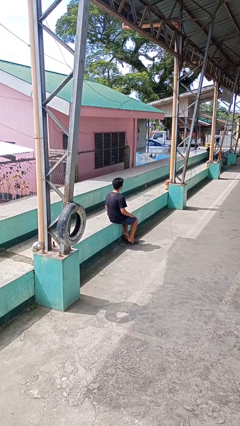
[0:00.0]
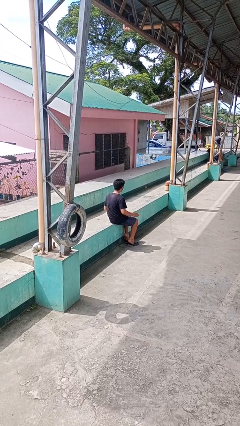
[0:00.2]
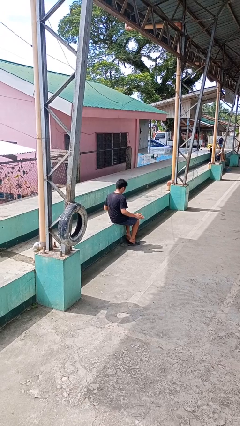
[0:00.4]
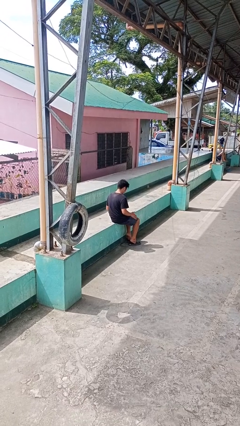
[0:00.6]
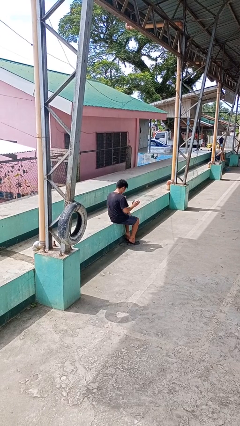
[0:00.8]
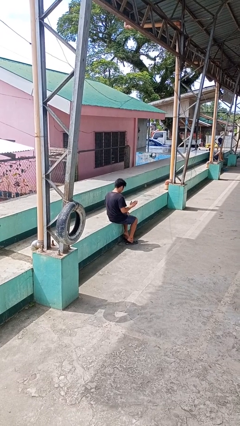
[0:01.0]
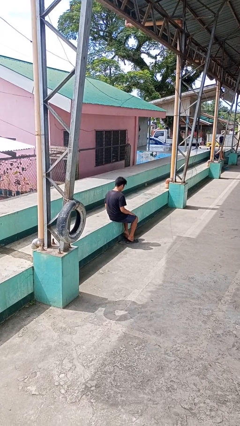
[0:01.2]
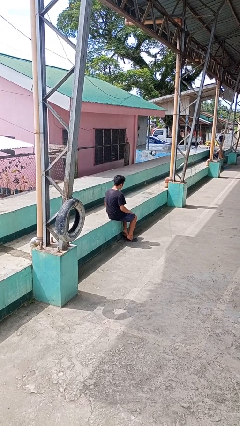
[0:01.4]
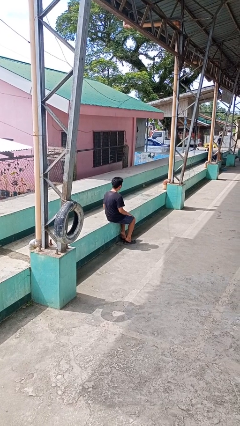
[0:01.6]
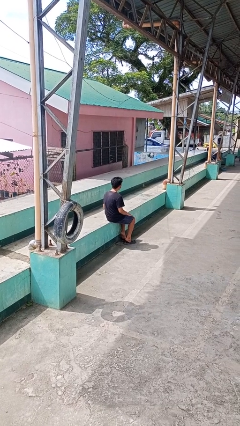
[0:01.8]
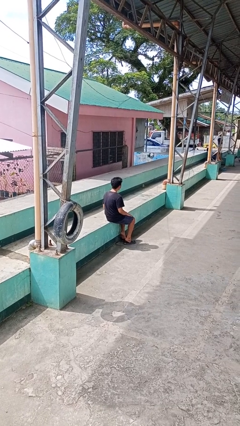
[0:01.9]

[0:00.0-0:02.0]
person slaps hands on thighs

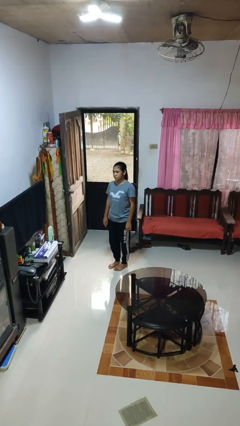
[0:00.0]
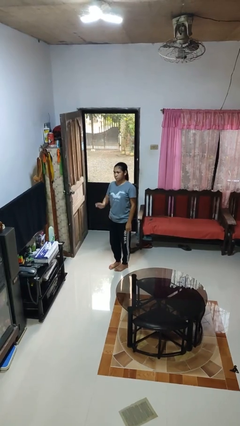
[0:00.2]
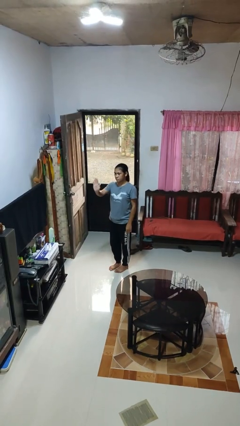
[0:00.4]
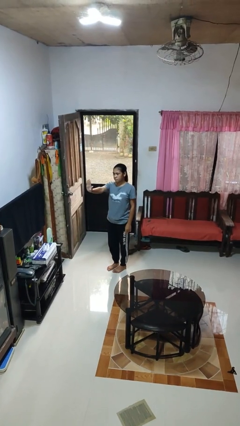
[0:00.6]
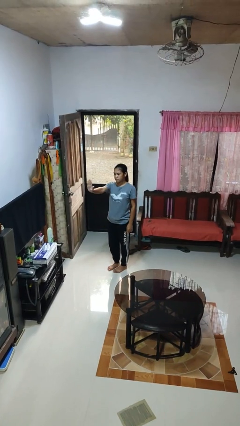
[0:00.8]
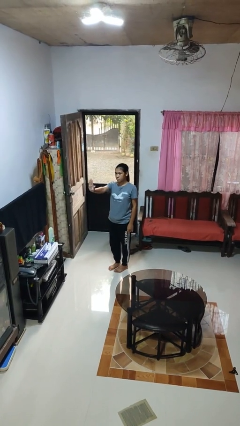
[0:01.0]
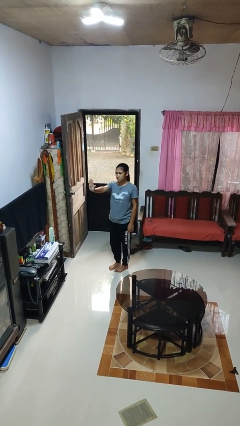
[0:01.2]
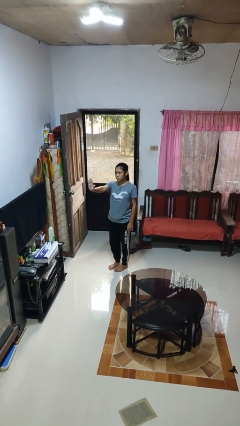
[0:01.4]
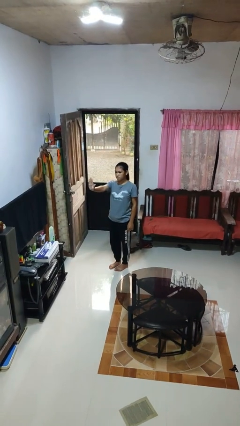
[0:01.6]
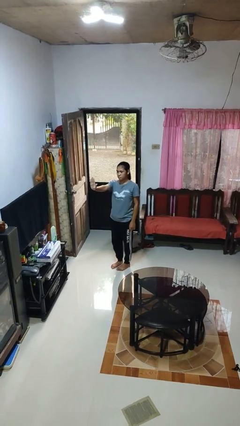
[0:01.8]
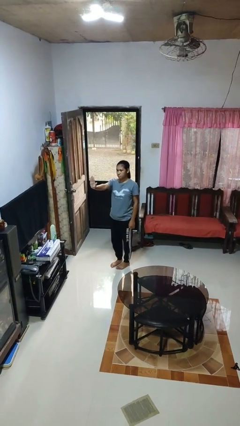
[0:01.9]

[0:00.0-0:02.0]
person gestures stop

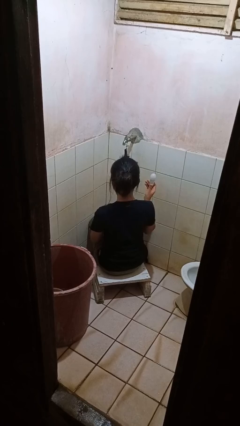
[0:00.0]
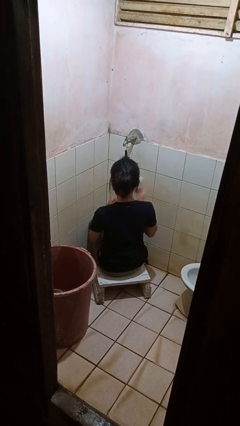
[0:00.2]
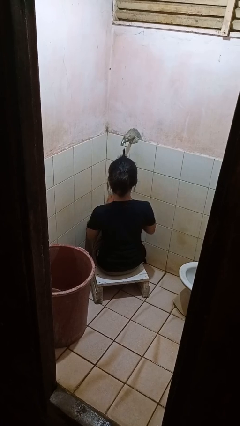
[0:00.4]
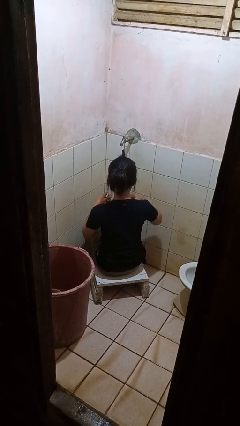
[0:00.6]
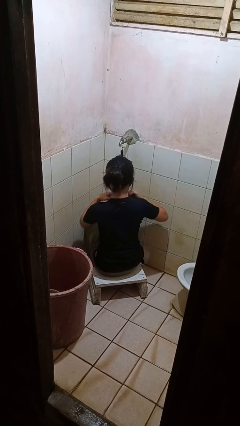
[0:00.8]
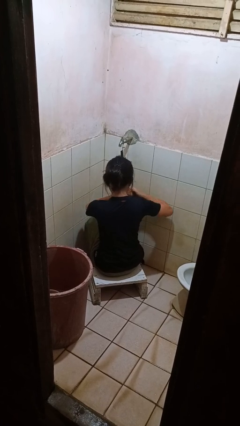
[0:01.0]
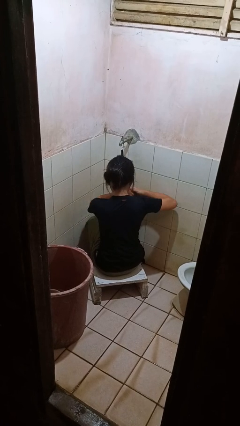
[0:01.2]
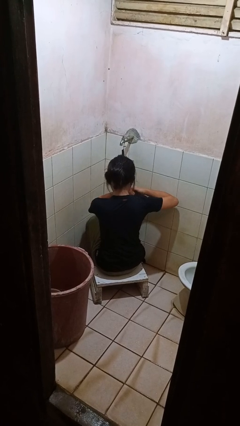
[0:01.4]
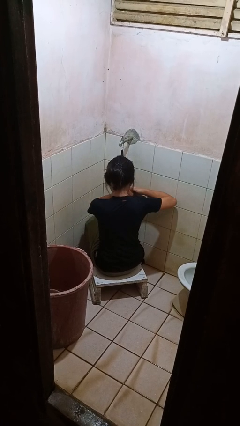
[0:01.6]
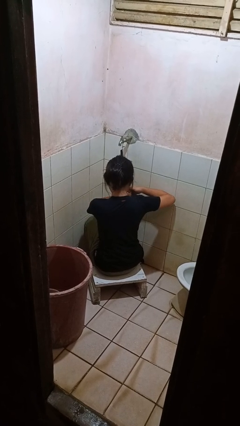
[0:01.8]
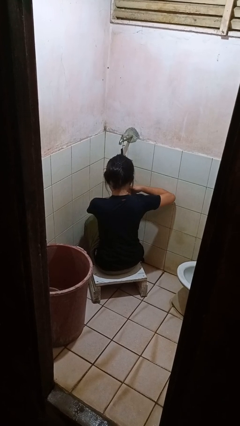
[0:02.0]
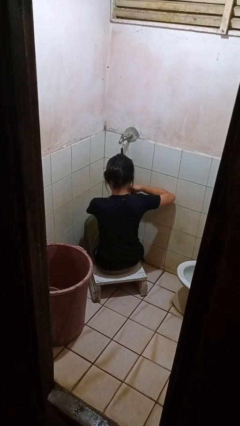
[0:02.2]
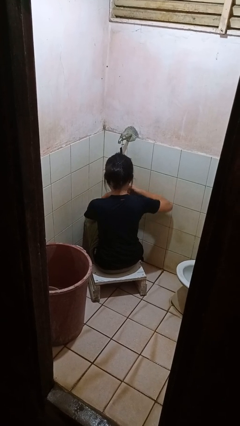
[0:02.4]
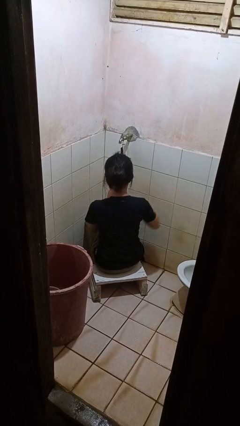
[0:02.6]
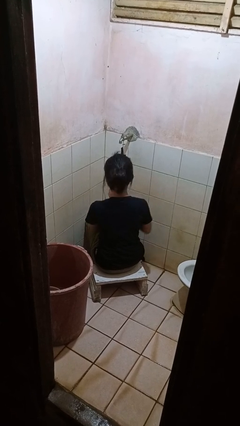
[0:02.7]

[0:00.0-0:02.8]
person applies deodorant

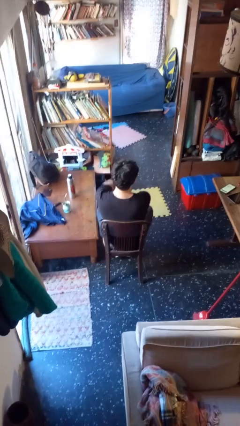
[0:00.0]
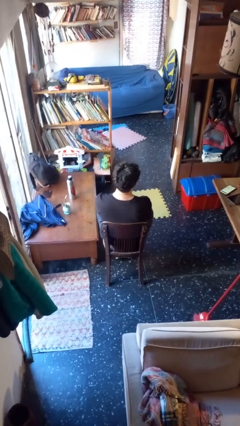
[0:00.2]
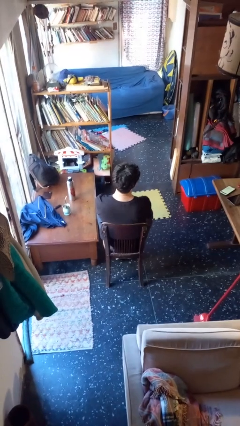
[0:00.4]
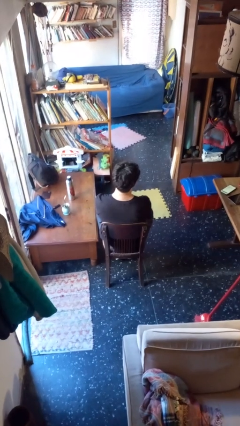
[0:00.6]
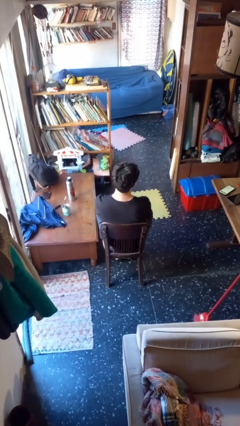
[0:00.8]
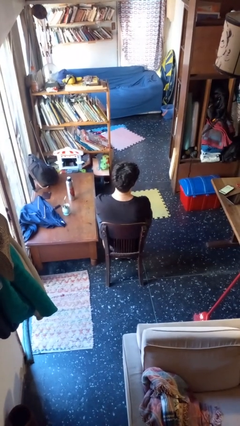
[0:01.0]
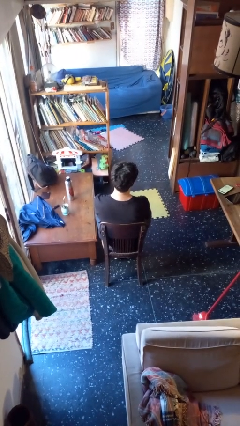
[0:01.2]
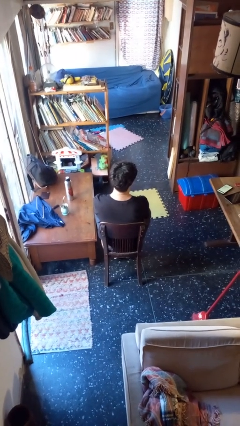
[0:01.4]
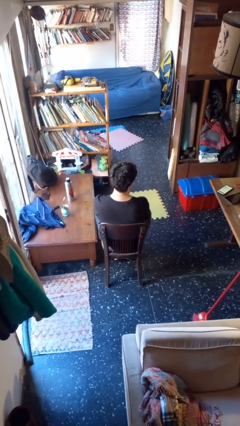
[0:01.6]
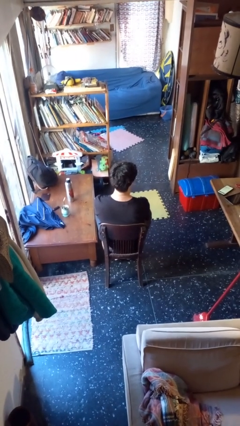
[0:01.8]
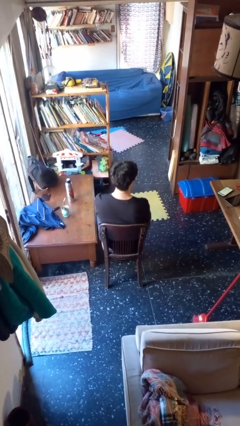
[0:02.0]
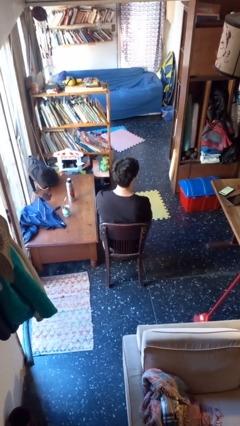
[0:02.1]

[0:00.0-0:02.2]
person crosses arms

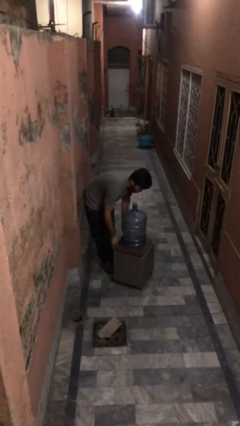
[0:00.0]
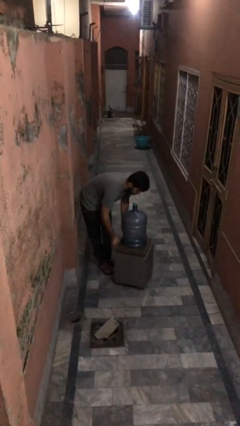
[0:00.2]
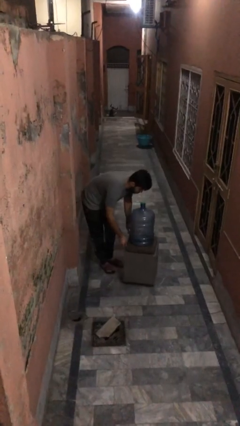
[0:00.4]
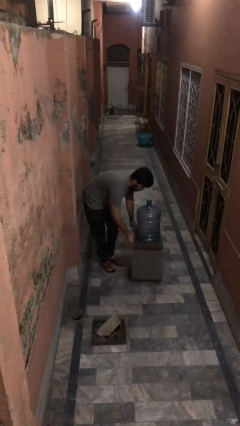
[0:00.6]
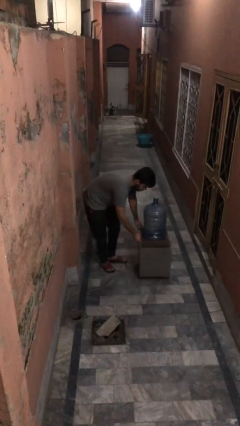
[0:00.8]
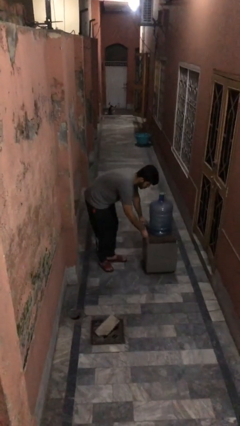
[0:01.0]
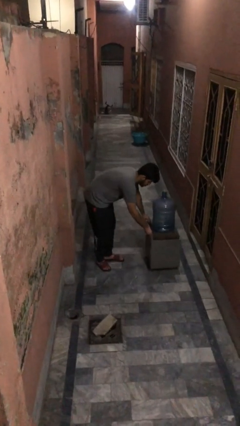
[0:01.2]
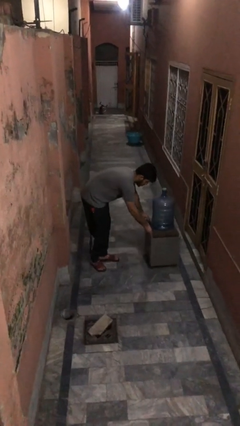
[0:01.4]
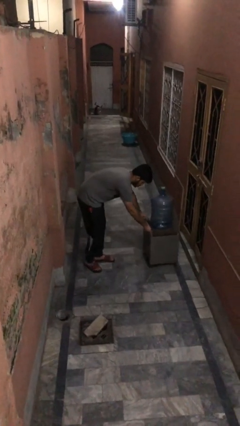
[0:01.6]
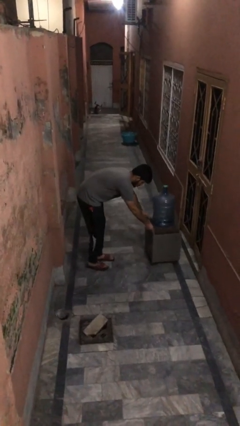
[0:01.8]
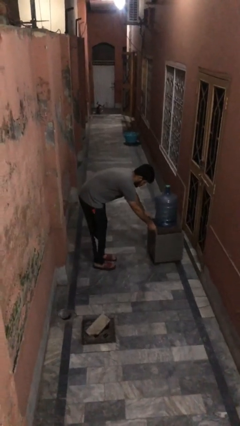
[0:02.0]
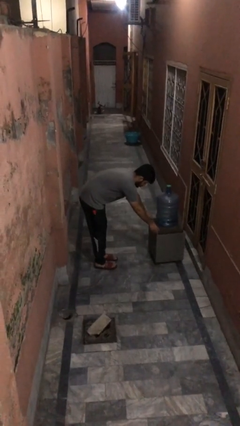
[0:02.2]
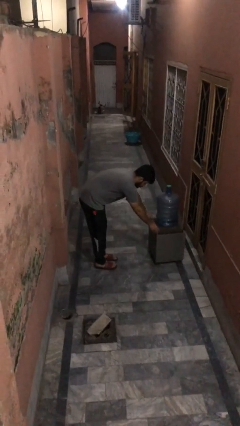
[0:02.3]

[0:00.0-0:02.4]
person pushes wheeled cart

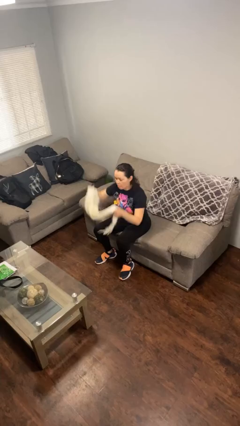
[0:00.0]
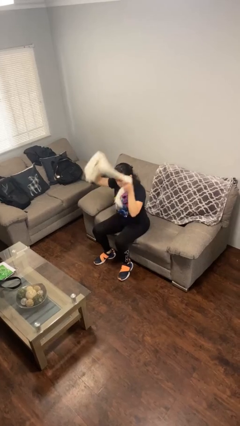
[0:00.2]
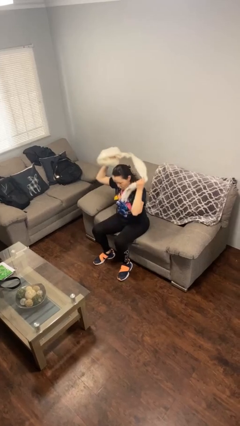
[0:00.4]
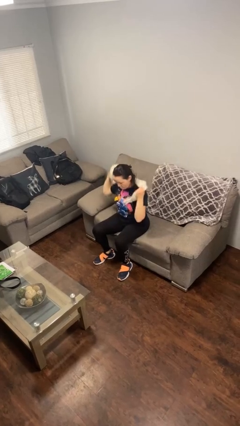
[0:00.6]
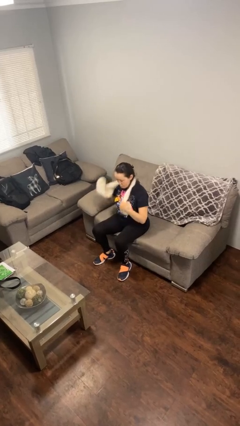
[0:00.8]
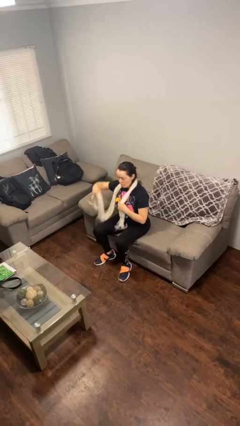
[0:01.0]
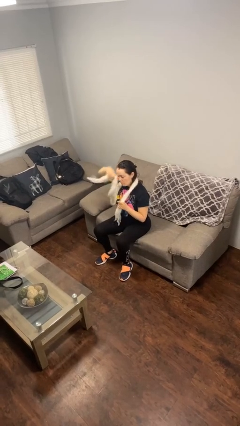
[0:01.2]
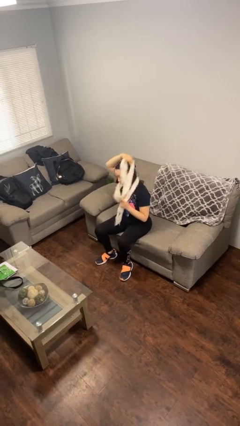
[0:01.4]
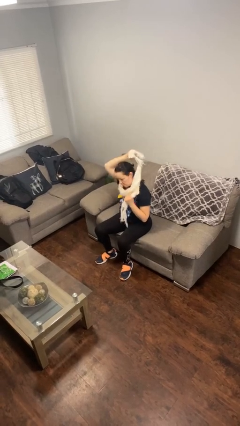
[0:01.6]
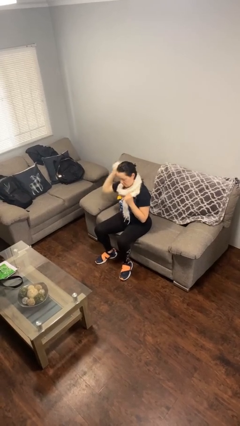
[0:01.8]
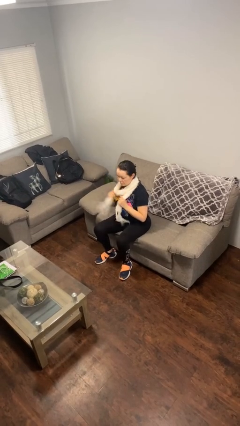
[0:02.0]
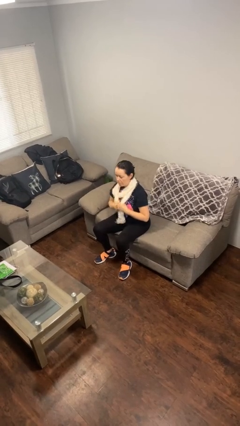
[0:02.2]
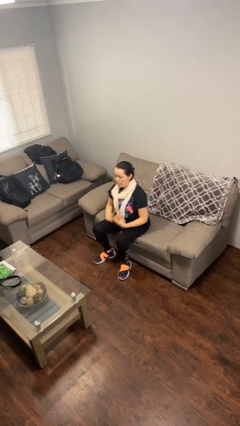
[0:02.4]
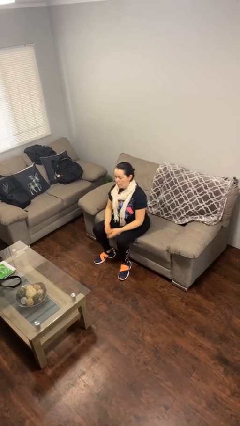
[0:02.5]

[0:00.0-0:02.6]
person puts on scarf

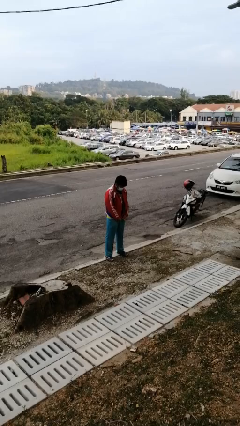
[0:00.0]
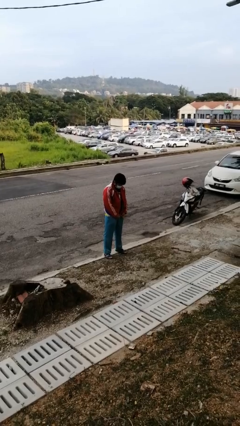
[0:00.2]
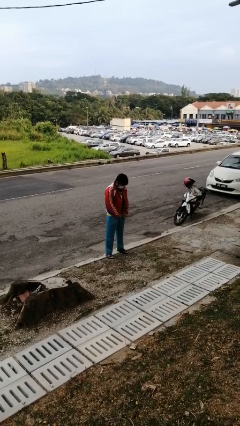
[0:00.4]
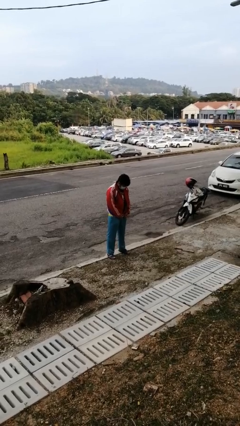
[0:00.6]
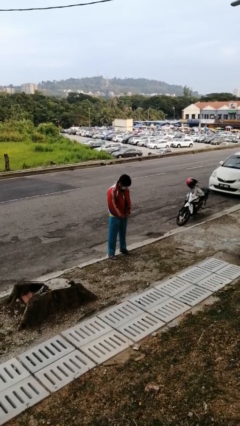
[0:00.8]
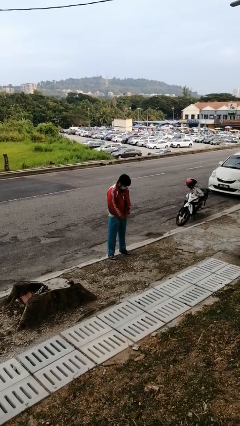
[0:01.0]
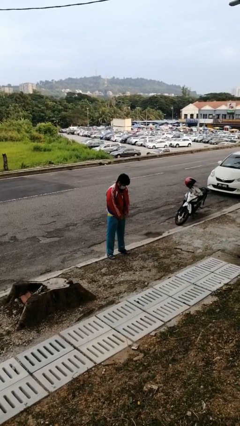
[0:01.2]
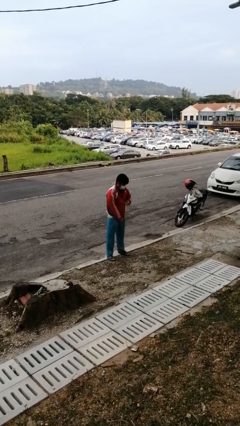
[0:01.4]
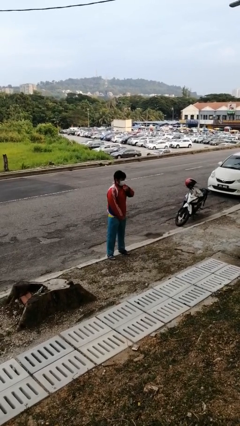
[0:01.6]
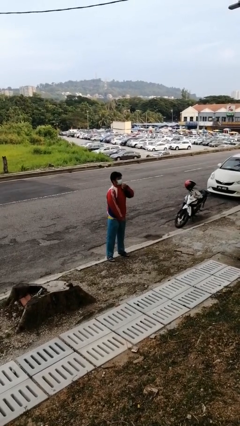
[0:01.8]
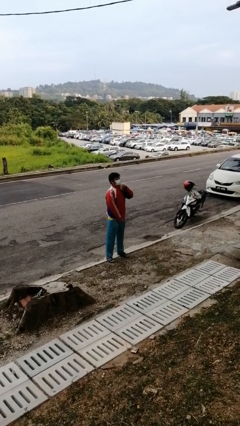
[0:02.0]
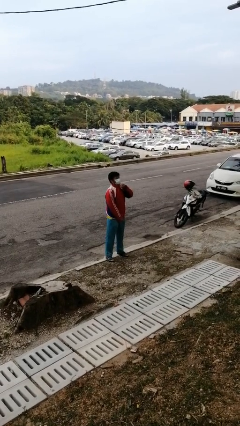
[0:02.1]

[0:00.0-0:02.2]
person zips up jacket

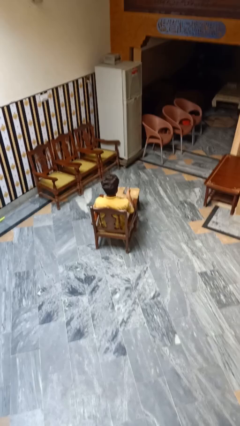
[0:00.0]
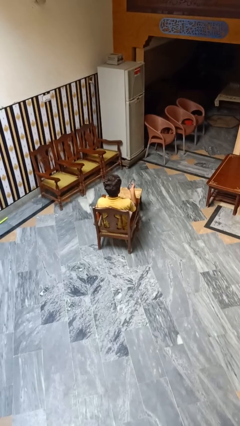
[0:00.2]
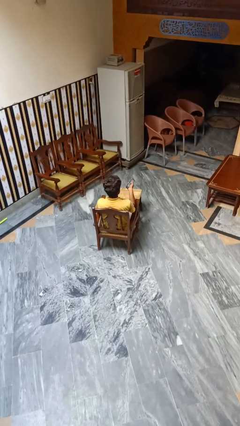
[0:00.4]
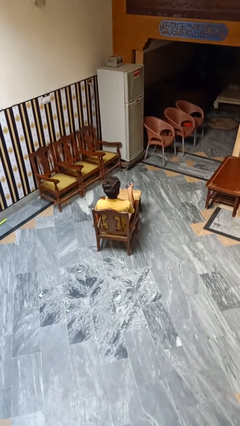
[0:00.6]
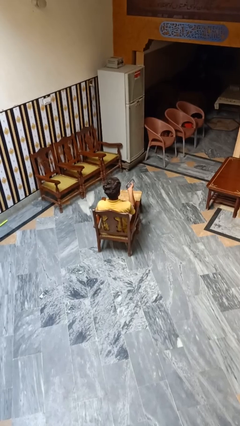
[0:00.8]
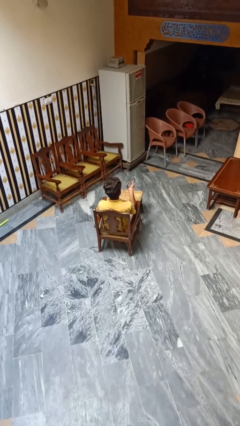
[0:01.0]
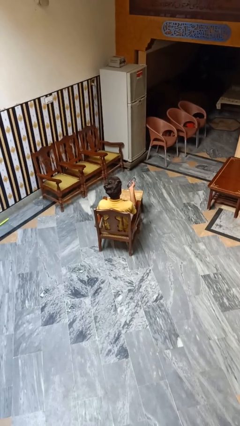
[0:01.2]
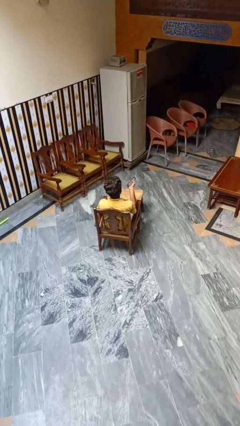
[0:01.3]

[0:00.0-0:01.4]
person uses television remote
